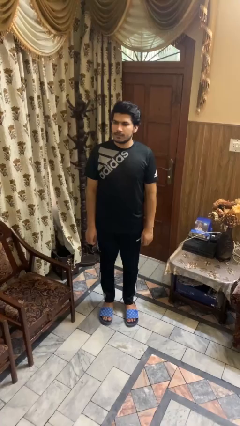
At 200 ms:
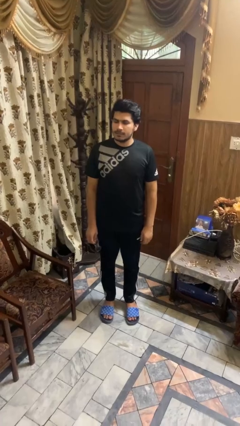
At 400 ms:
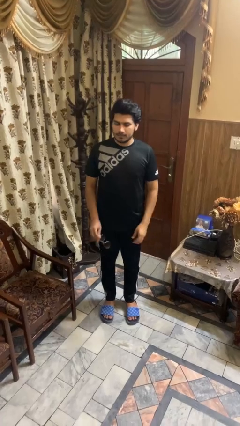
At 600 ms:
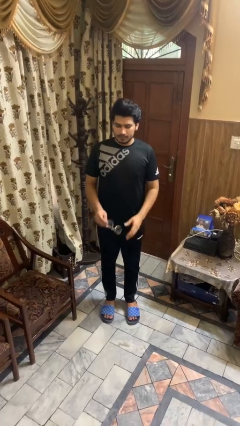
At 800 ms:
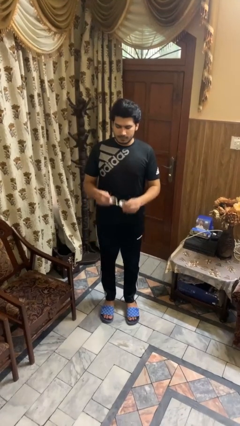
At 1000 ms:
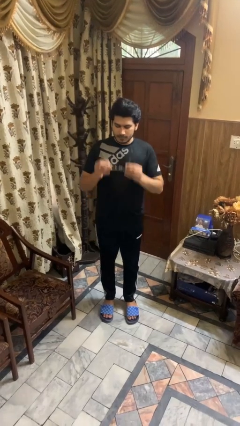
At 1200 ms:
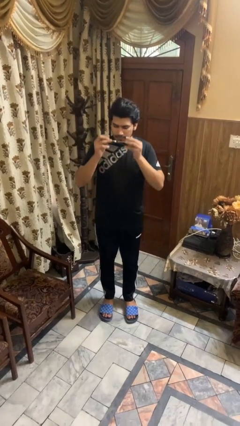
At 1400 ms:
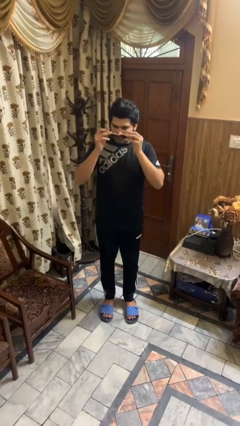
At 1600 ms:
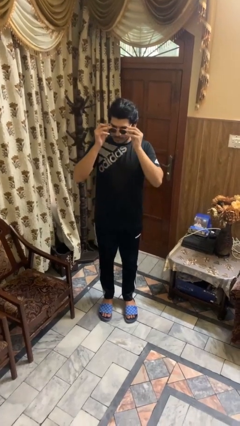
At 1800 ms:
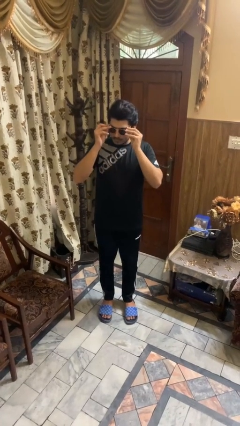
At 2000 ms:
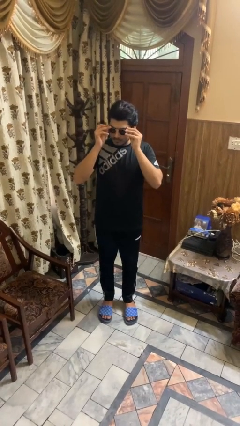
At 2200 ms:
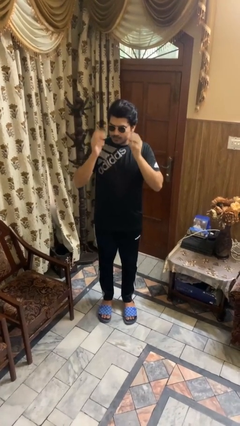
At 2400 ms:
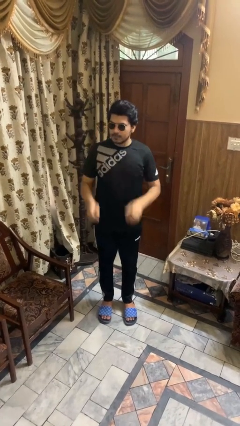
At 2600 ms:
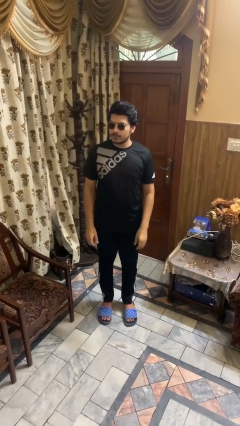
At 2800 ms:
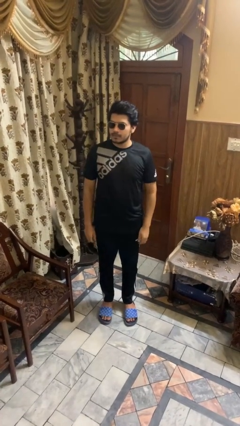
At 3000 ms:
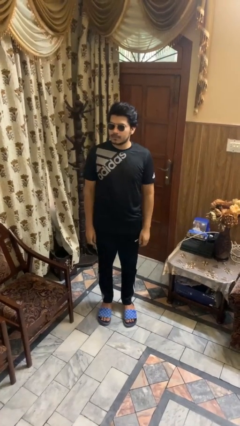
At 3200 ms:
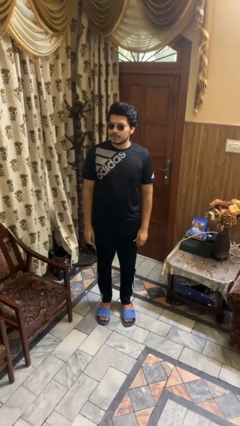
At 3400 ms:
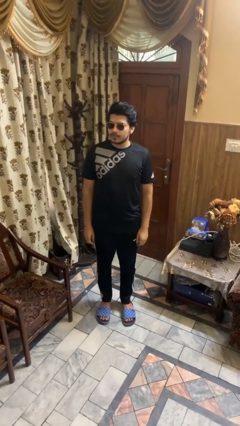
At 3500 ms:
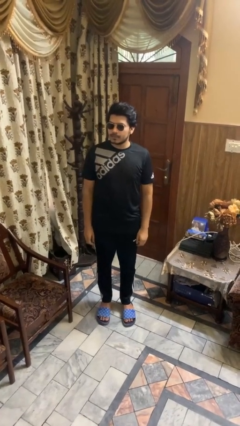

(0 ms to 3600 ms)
person puts on sunglasses

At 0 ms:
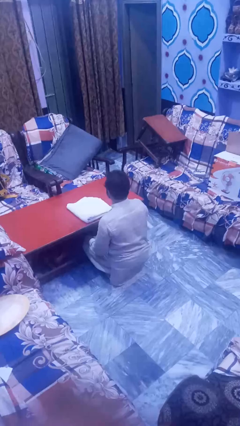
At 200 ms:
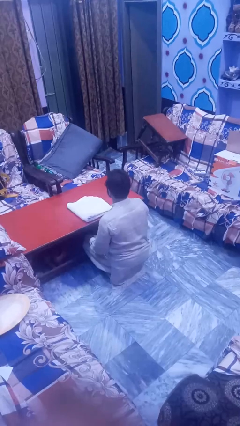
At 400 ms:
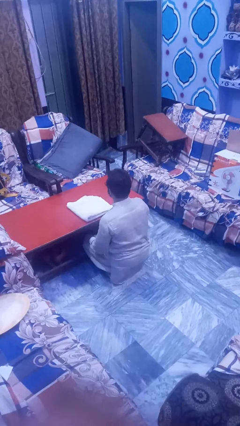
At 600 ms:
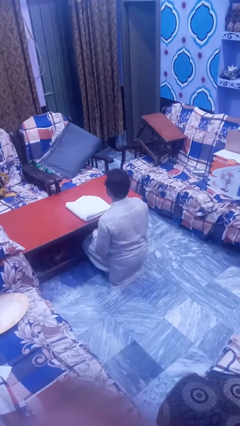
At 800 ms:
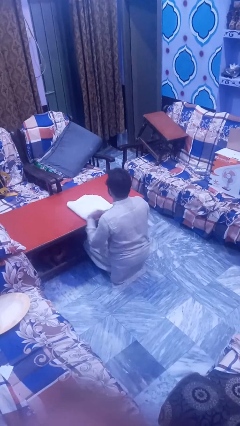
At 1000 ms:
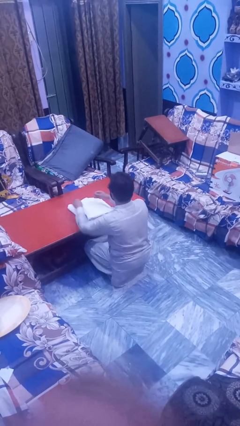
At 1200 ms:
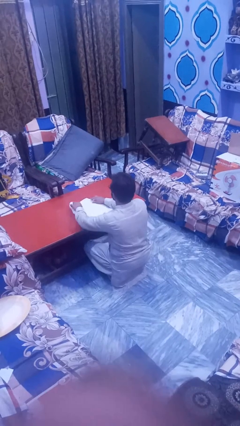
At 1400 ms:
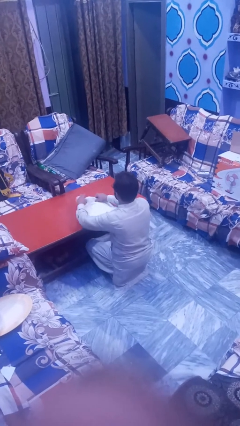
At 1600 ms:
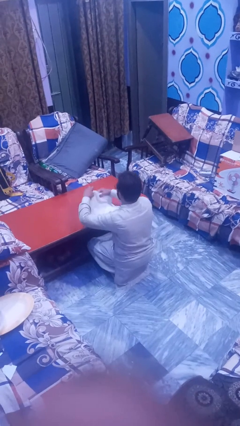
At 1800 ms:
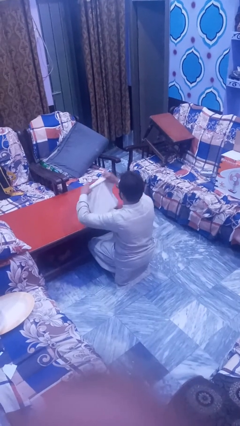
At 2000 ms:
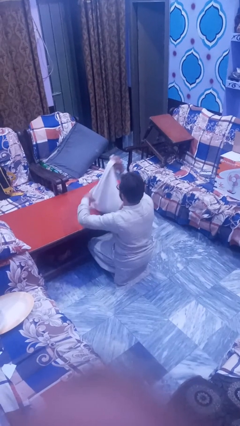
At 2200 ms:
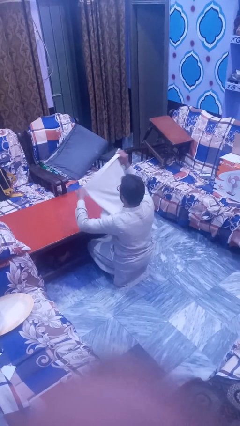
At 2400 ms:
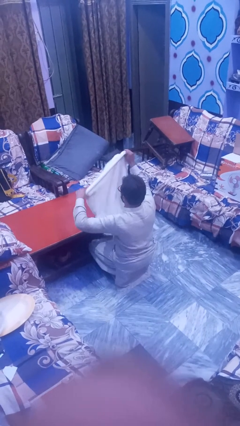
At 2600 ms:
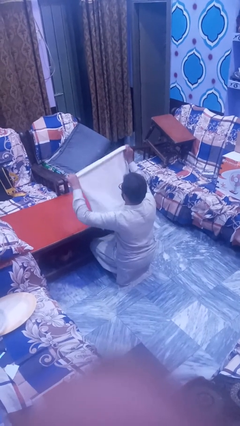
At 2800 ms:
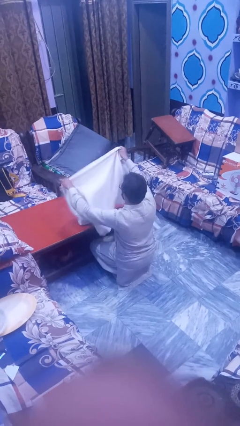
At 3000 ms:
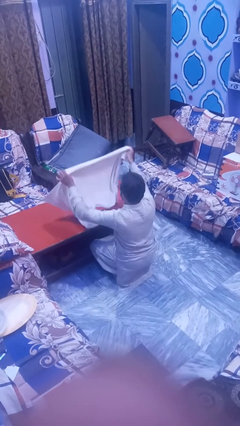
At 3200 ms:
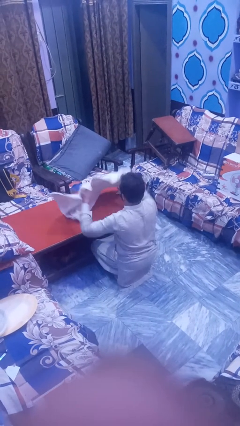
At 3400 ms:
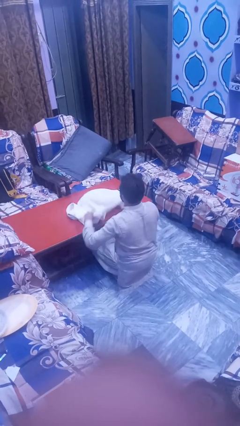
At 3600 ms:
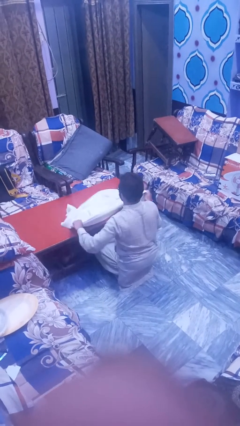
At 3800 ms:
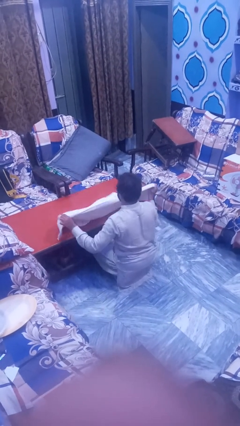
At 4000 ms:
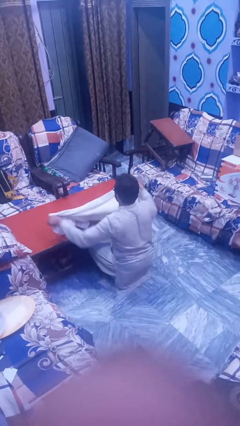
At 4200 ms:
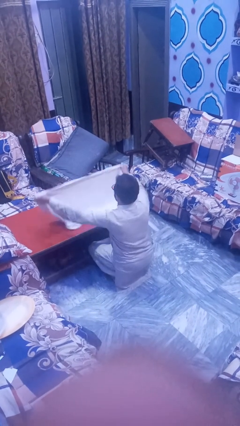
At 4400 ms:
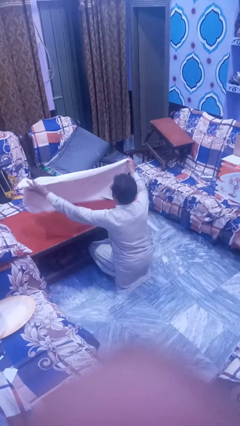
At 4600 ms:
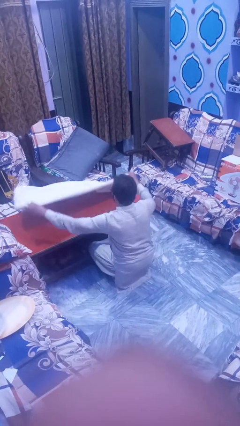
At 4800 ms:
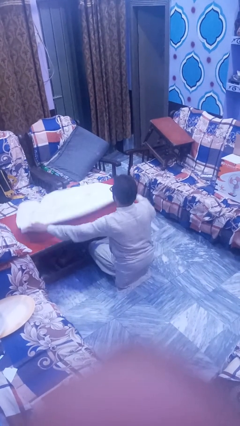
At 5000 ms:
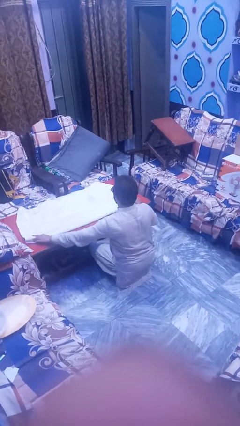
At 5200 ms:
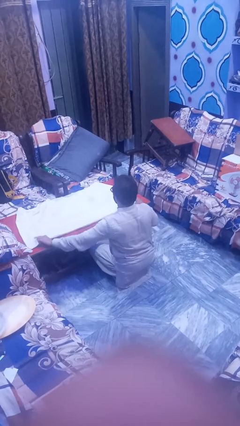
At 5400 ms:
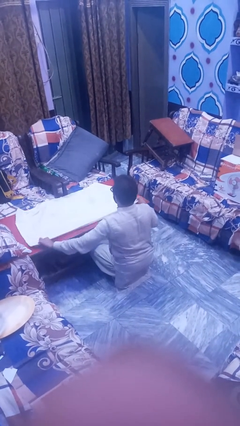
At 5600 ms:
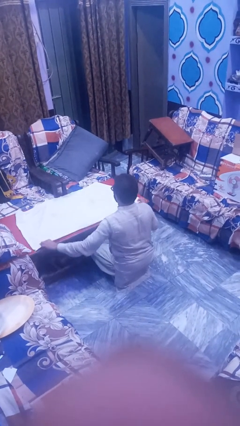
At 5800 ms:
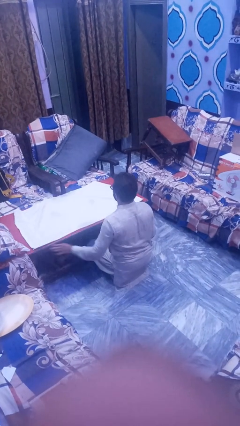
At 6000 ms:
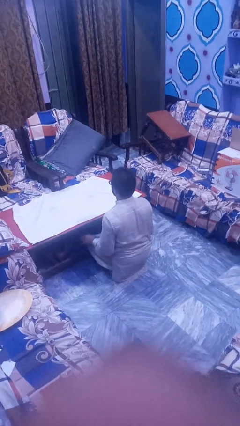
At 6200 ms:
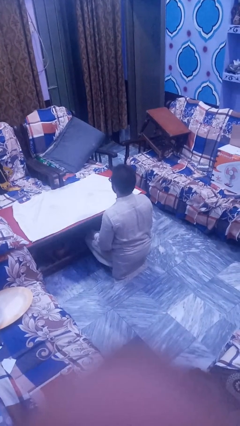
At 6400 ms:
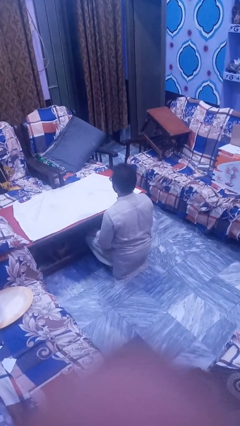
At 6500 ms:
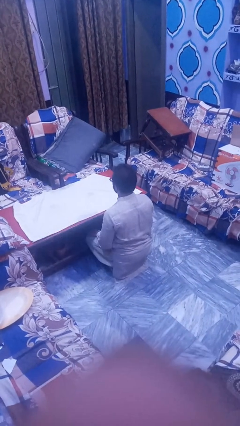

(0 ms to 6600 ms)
person spreads tablecloth

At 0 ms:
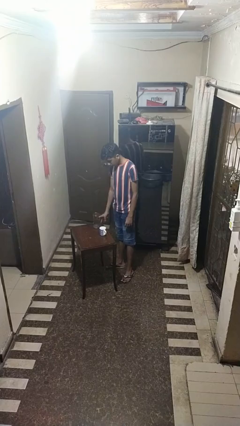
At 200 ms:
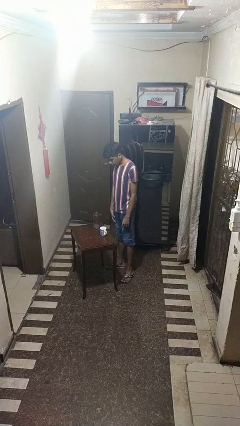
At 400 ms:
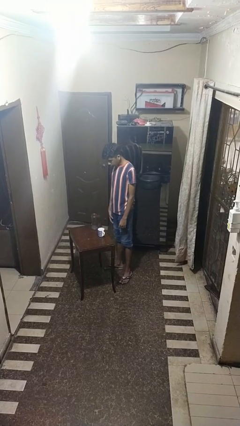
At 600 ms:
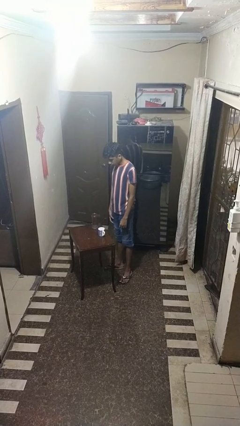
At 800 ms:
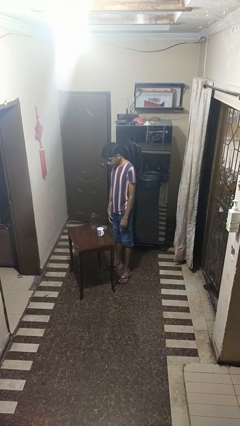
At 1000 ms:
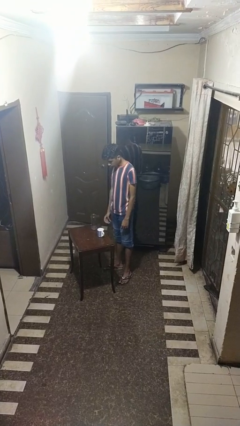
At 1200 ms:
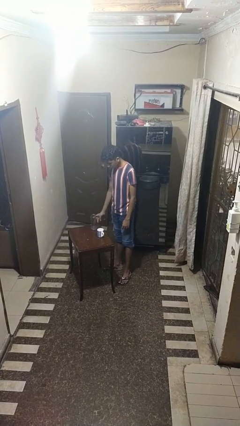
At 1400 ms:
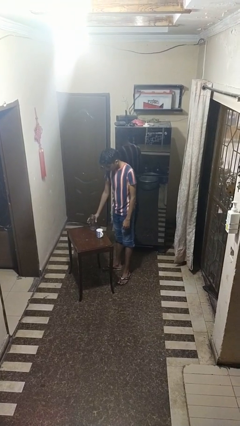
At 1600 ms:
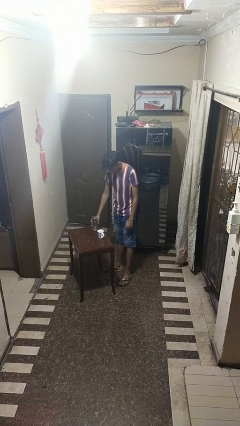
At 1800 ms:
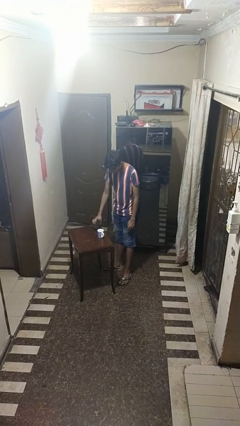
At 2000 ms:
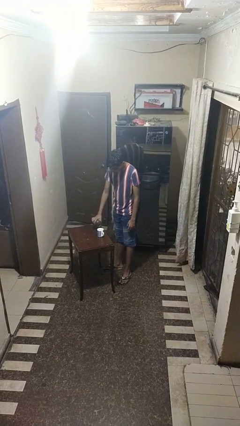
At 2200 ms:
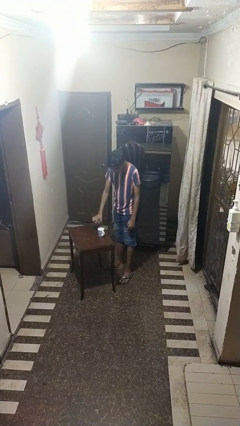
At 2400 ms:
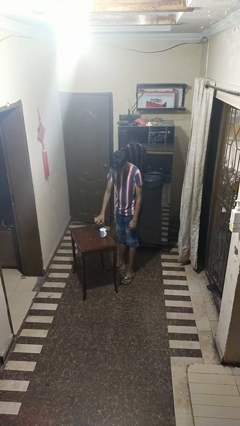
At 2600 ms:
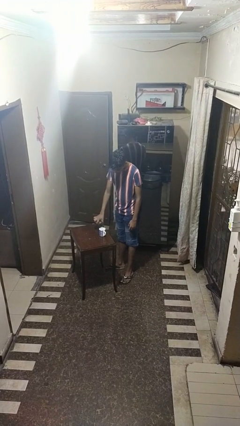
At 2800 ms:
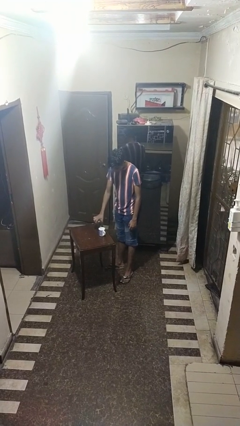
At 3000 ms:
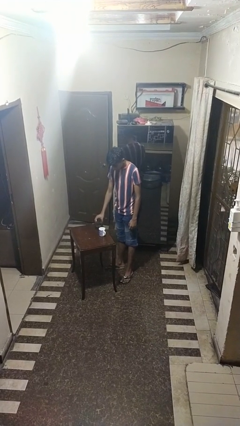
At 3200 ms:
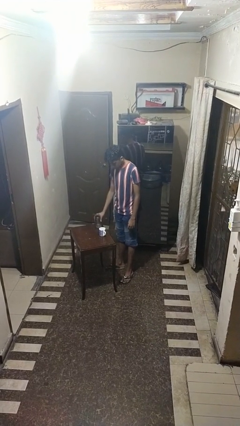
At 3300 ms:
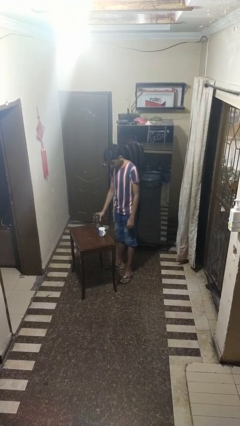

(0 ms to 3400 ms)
person pours liquid into cup

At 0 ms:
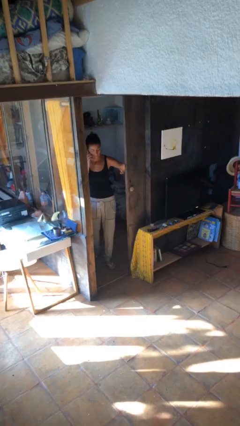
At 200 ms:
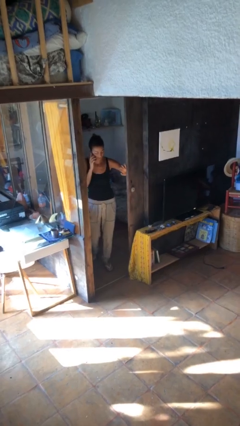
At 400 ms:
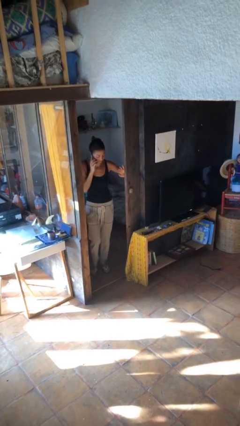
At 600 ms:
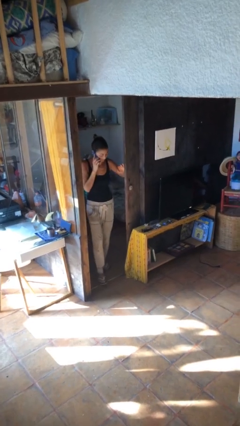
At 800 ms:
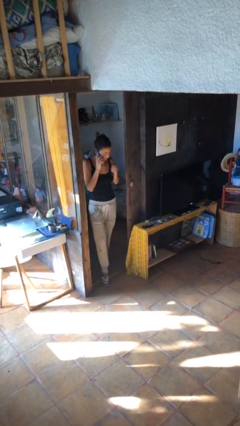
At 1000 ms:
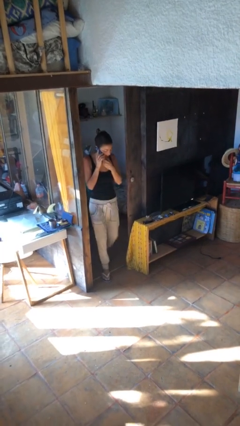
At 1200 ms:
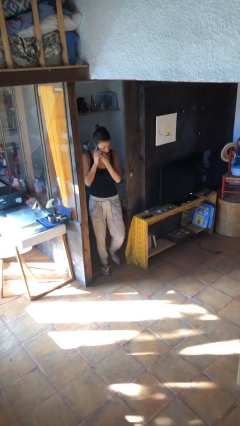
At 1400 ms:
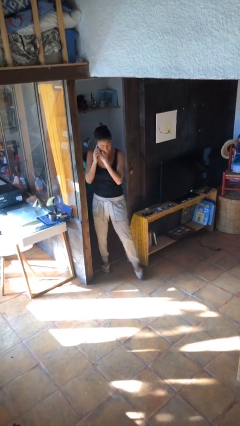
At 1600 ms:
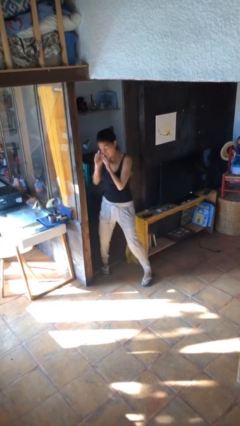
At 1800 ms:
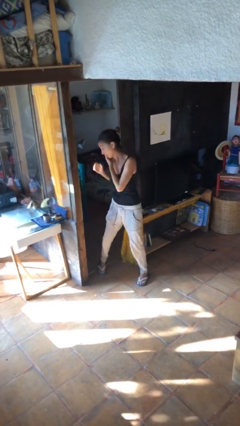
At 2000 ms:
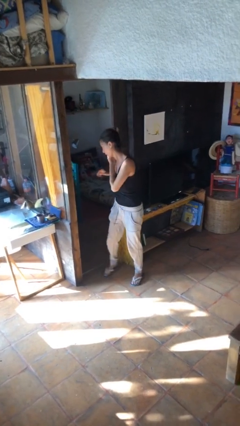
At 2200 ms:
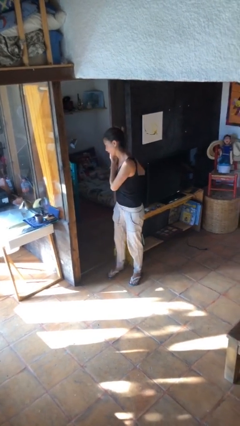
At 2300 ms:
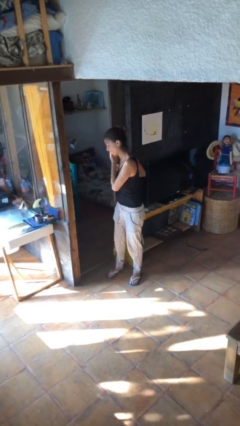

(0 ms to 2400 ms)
person enters scene through structure

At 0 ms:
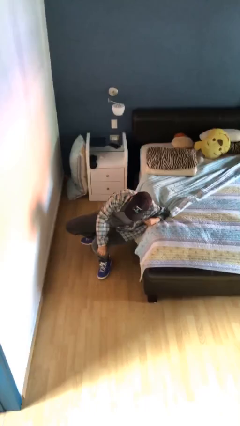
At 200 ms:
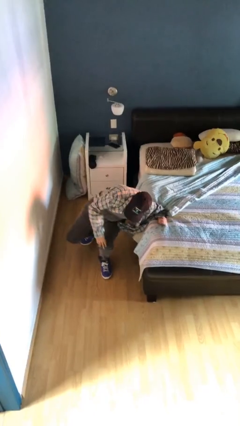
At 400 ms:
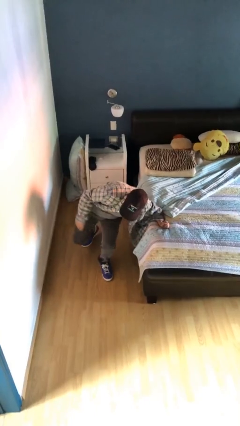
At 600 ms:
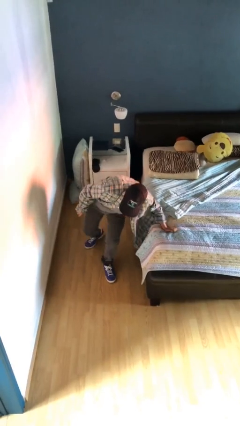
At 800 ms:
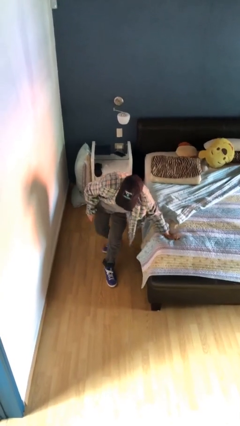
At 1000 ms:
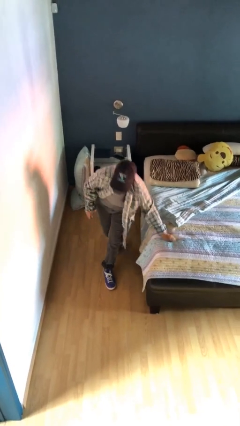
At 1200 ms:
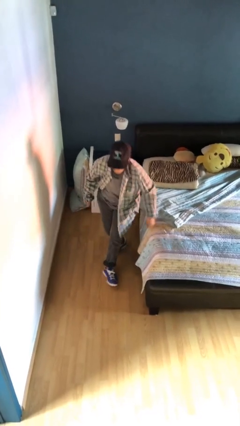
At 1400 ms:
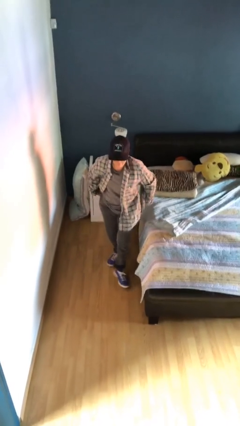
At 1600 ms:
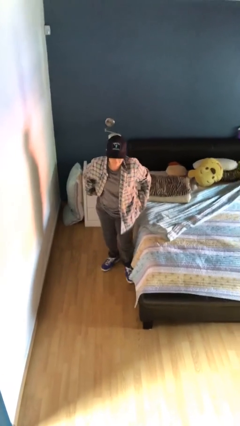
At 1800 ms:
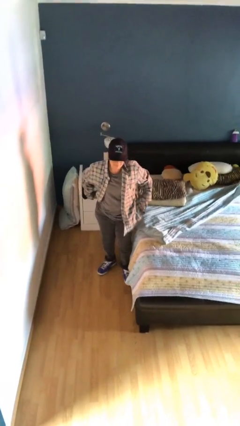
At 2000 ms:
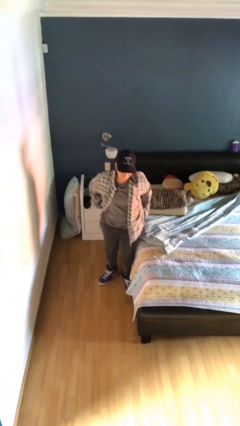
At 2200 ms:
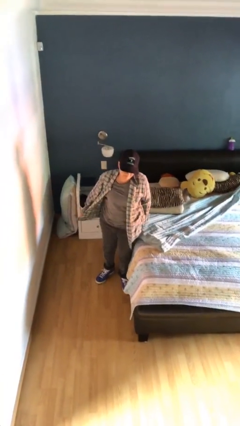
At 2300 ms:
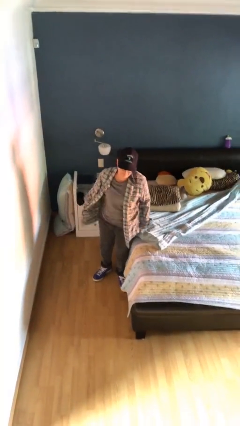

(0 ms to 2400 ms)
person stands up from floor
